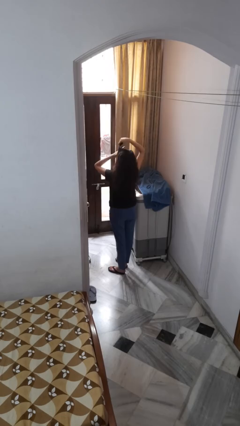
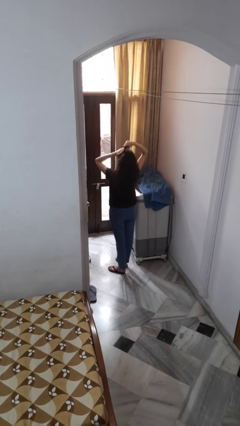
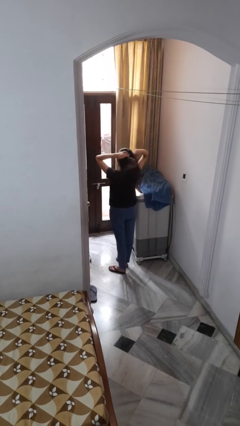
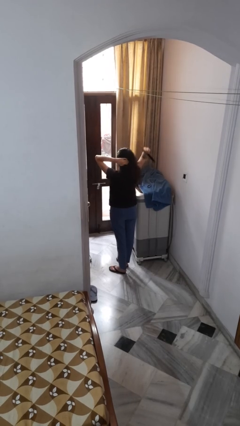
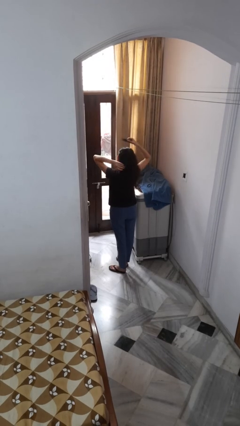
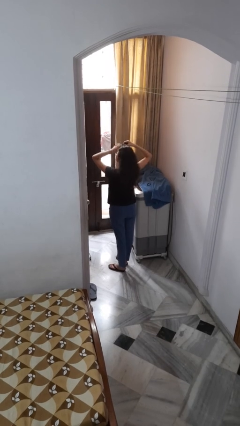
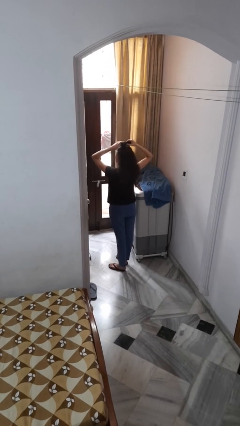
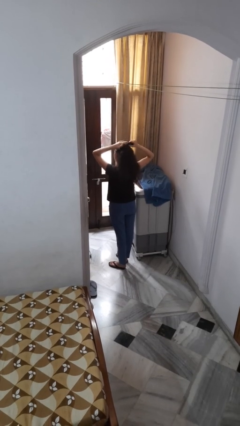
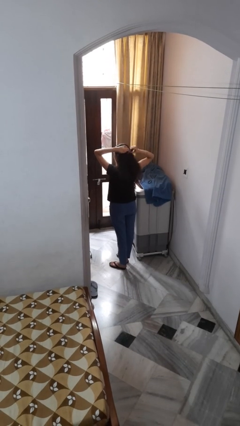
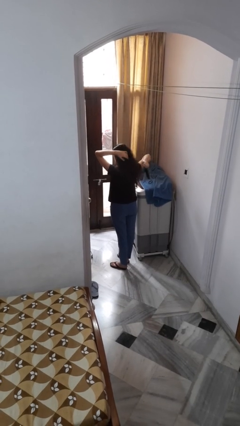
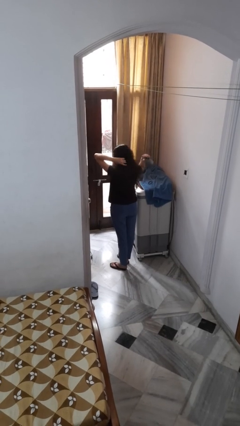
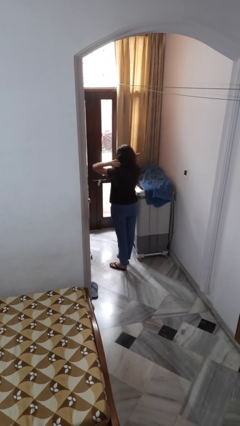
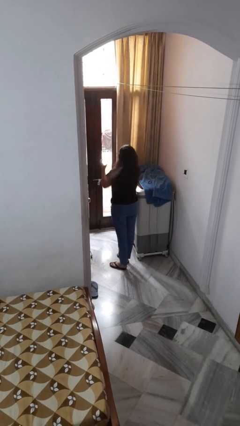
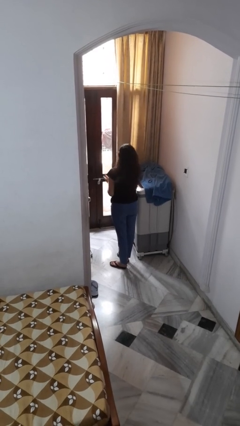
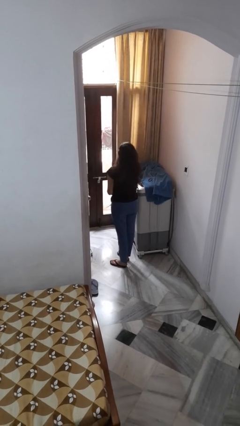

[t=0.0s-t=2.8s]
person brushes hair

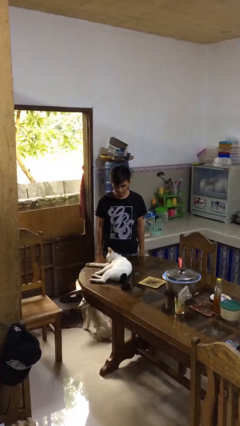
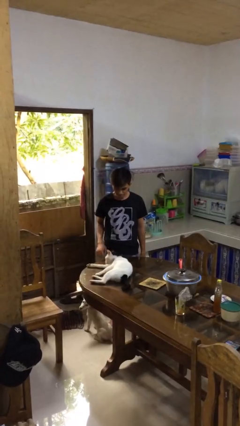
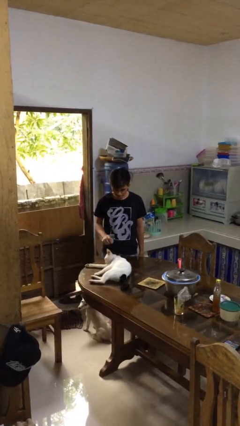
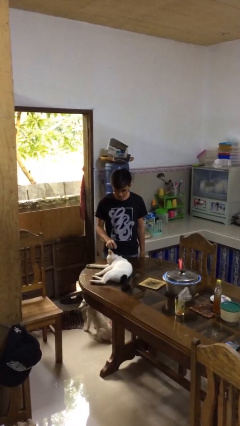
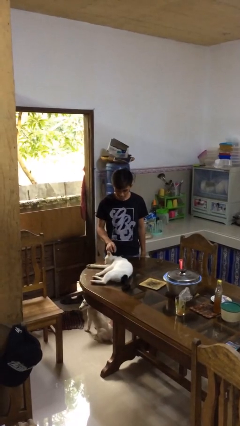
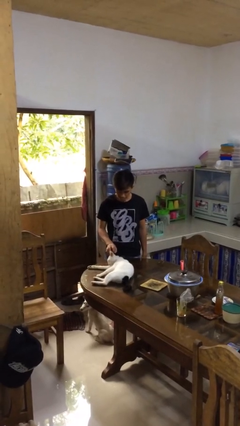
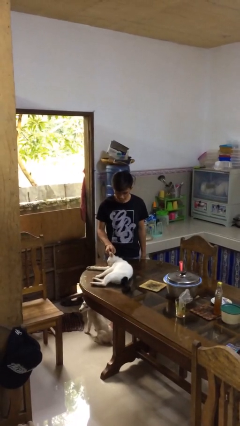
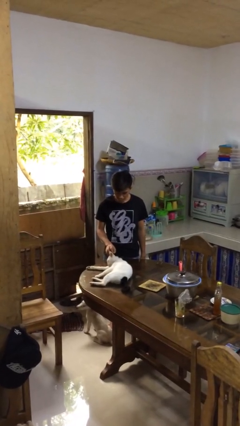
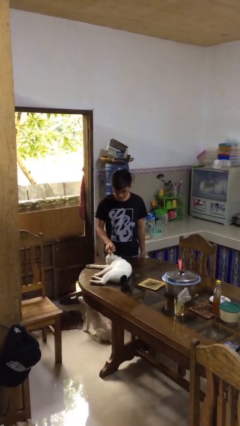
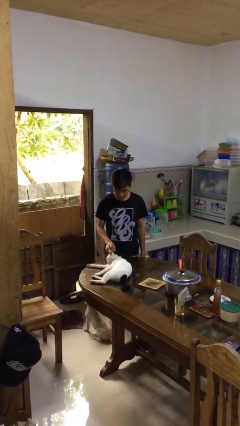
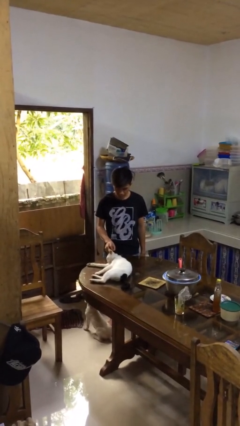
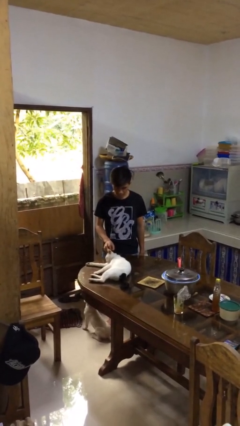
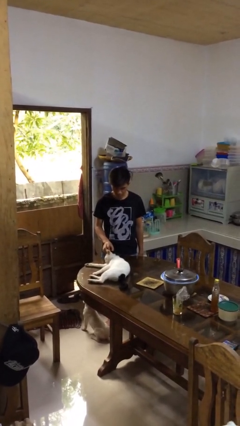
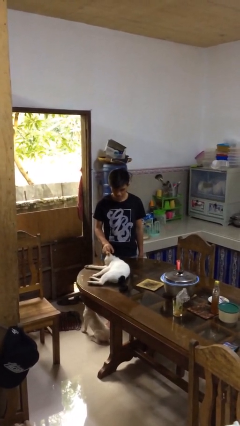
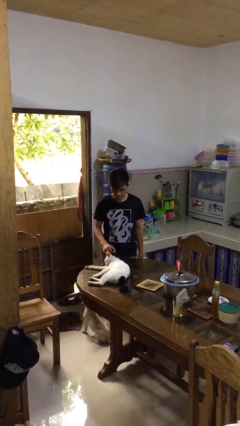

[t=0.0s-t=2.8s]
person pets cat

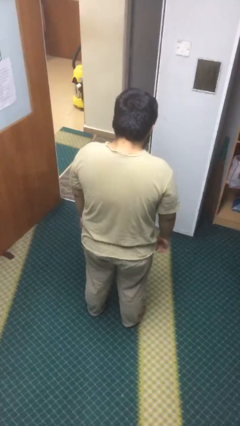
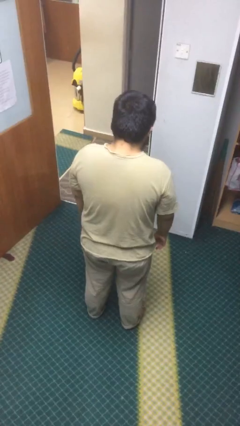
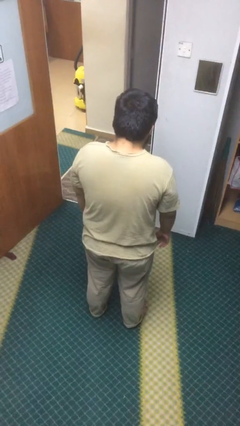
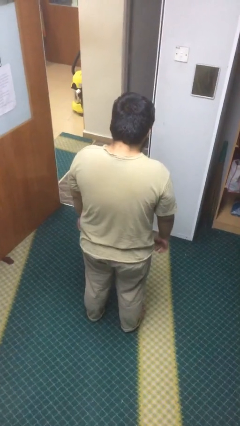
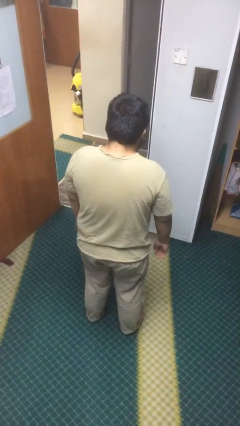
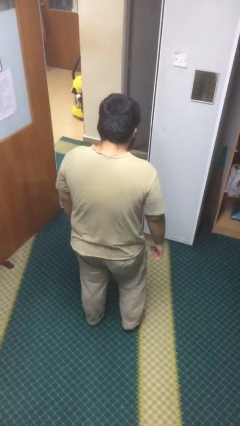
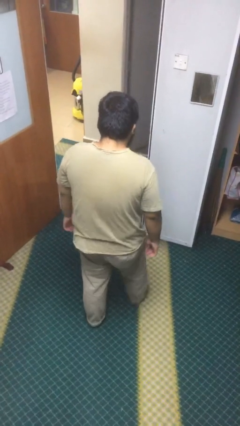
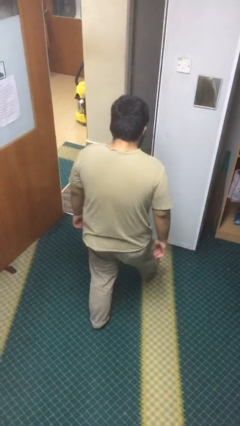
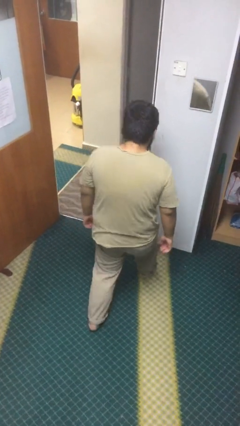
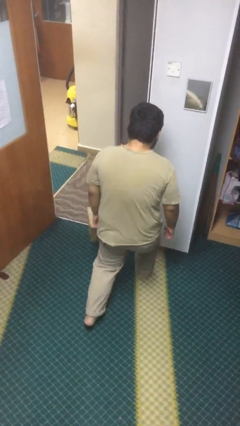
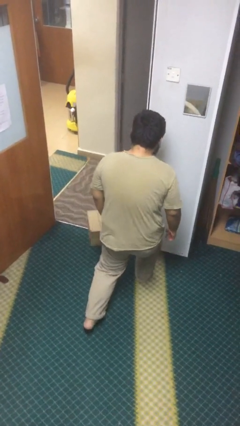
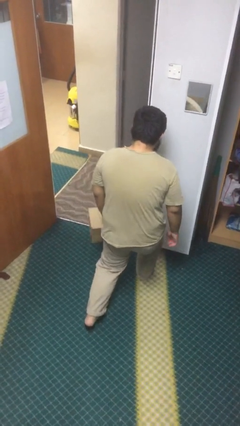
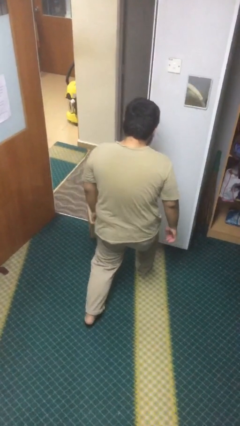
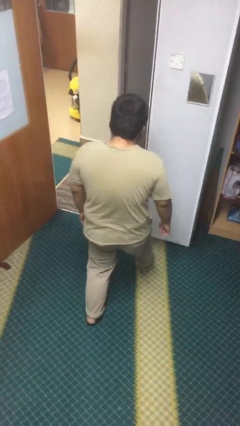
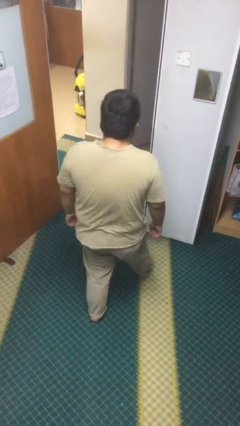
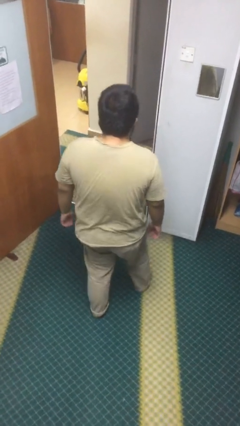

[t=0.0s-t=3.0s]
person exercises with lunges

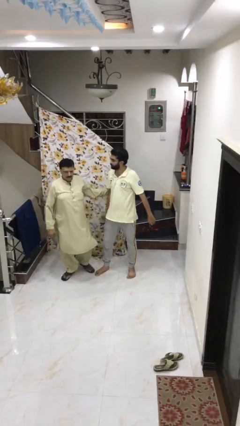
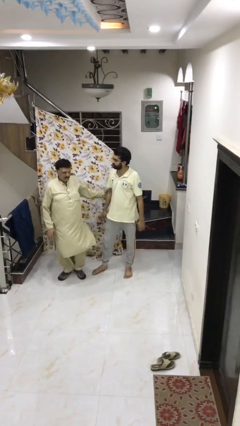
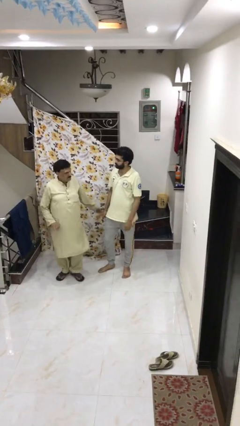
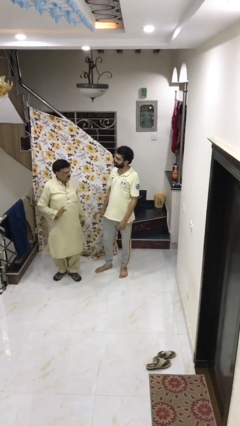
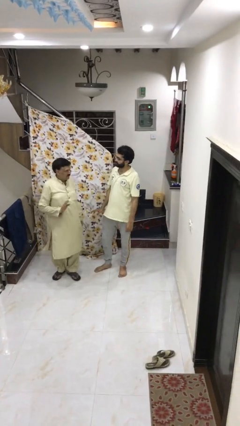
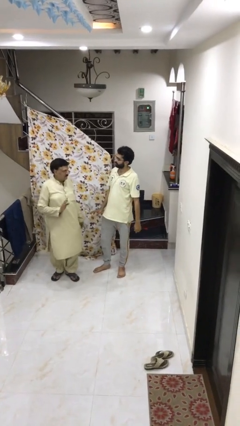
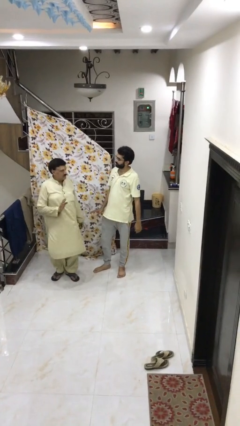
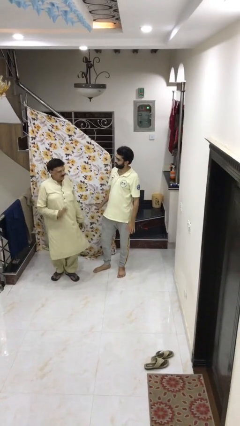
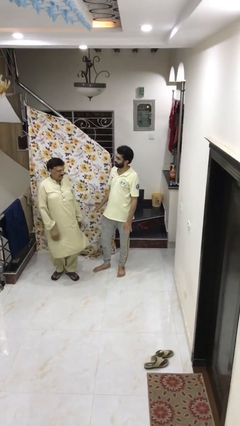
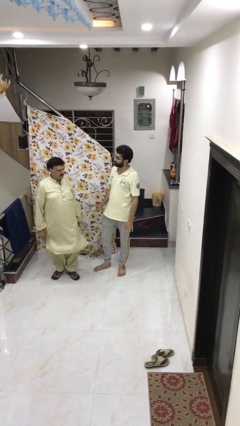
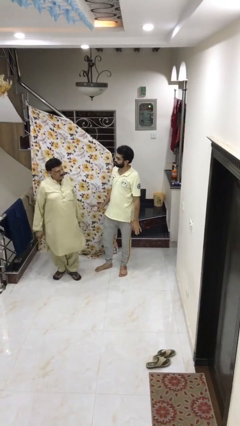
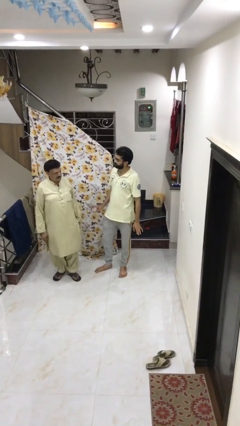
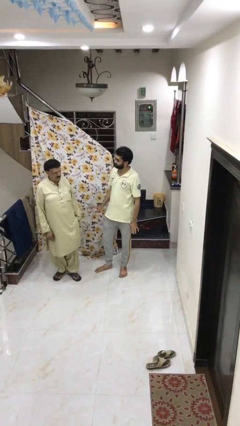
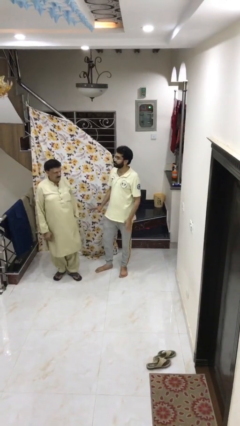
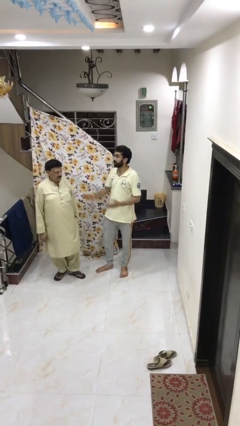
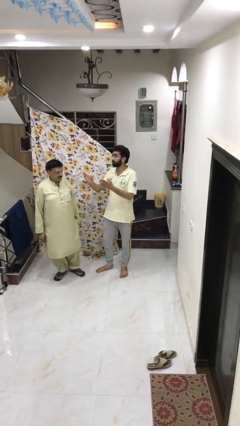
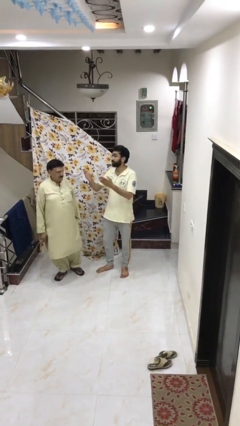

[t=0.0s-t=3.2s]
person talks to person

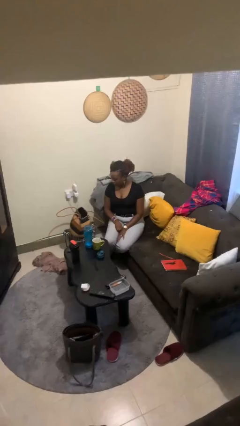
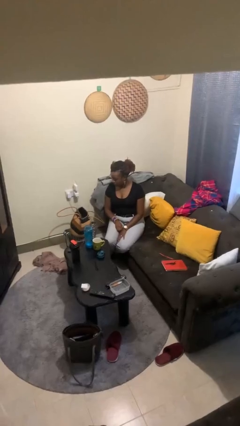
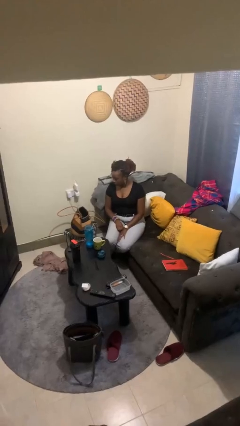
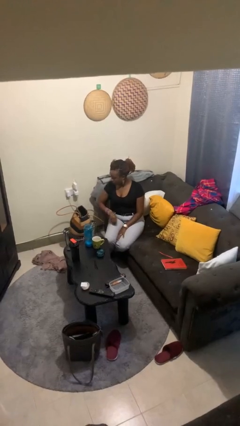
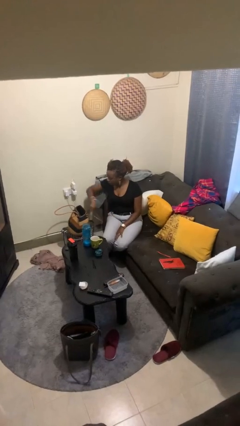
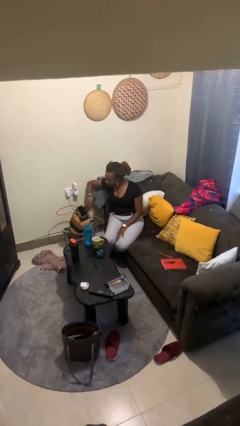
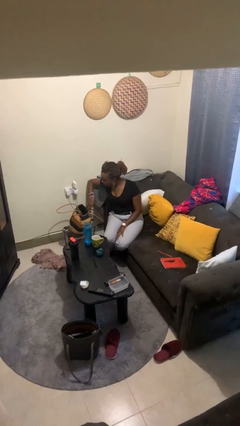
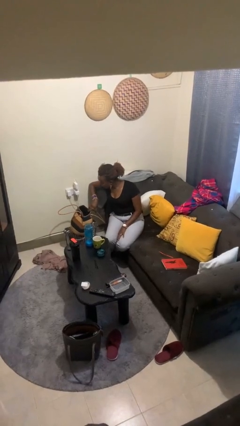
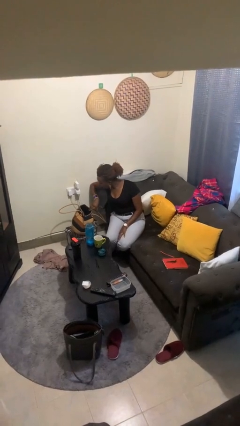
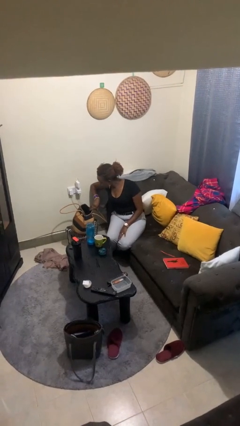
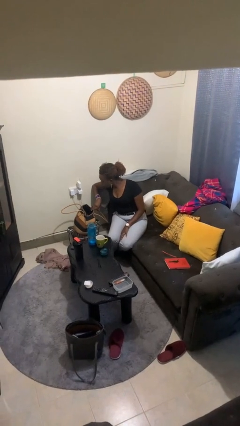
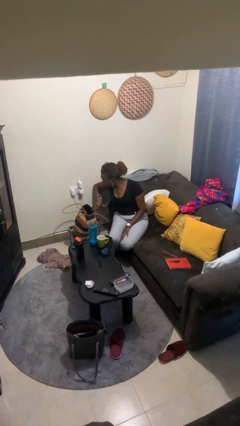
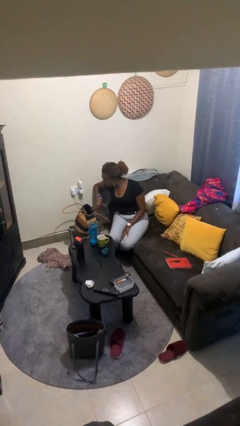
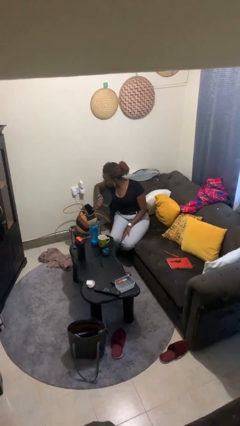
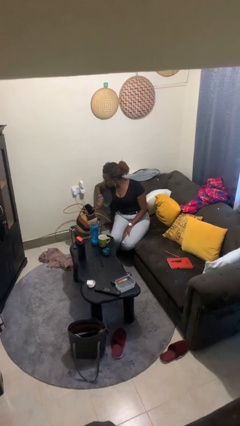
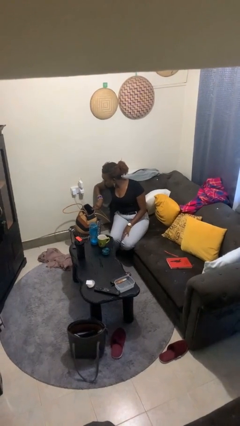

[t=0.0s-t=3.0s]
person searches in purse

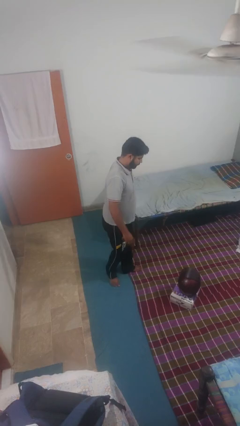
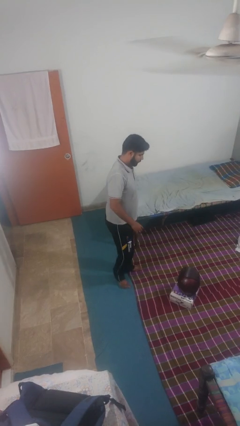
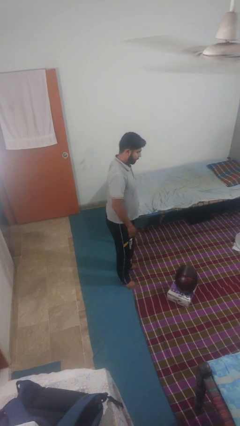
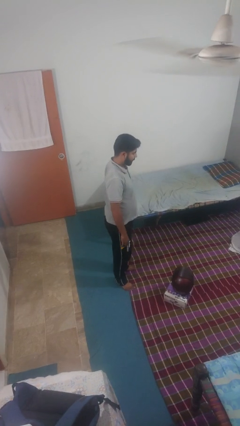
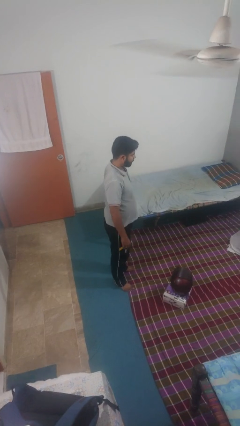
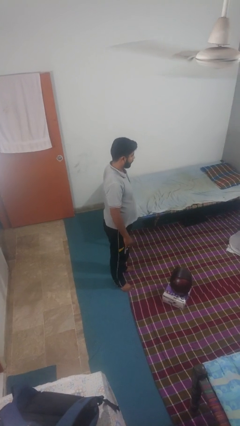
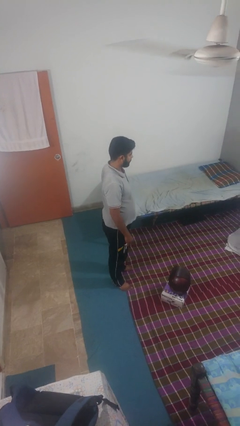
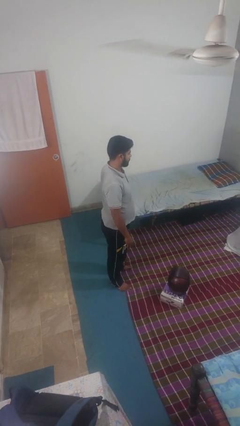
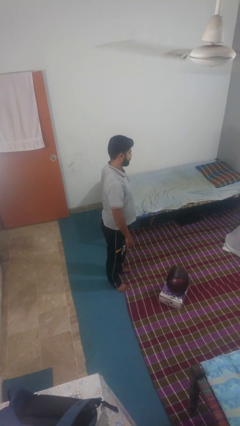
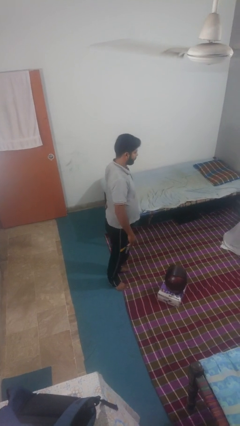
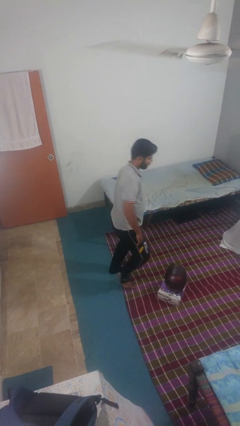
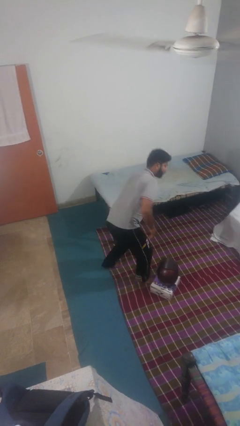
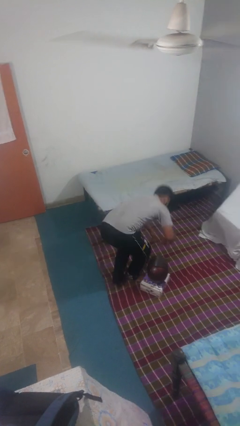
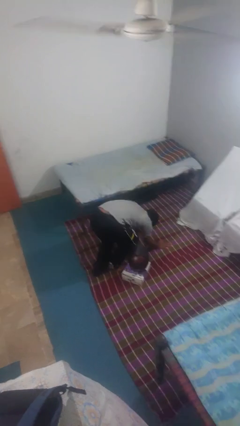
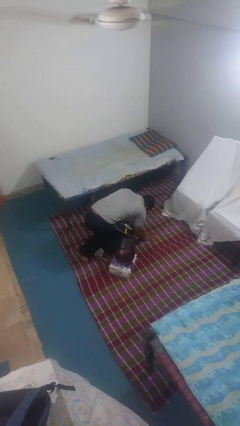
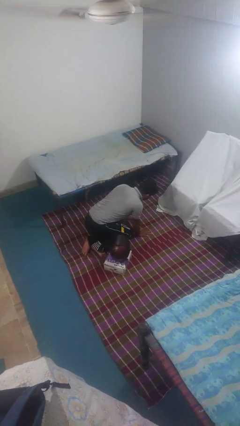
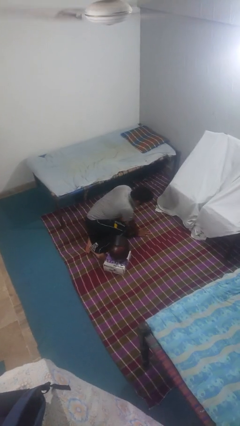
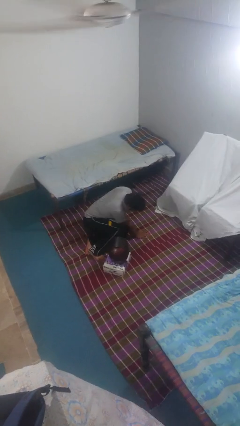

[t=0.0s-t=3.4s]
person trips on object on floor
